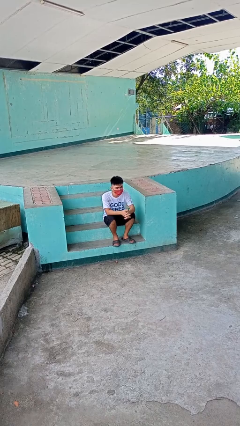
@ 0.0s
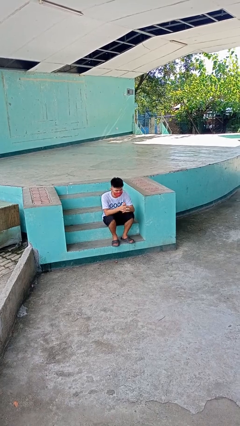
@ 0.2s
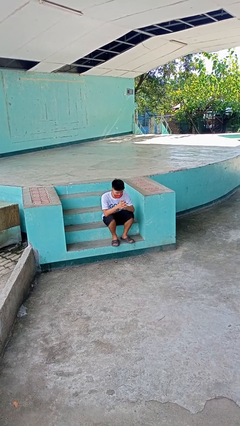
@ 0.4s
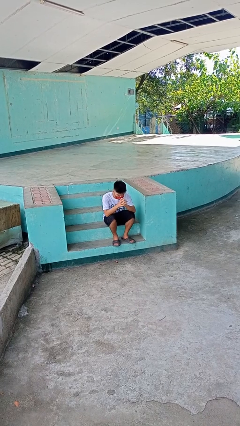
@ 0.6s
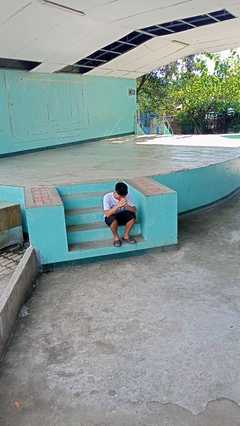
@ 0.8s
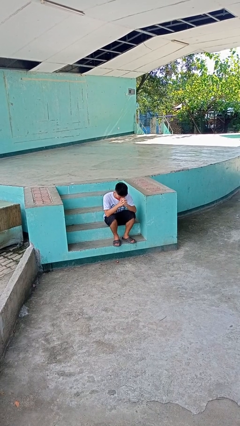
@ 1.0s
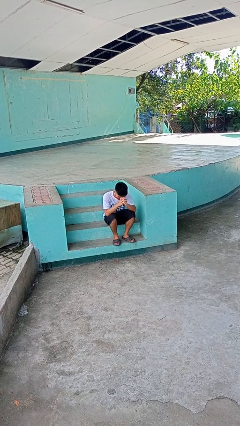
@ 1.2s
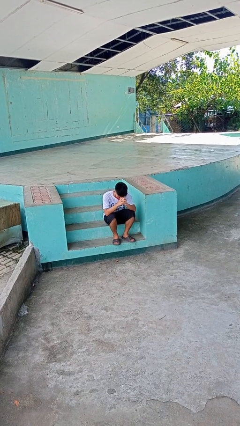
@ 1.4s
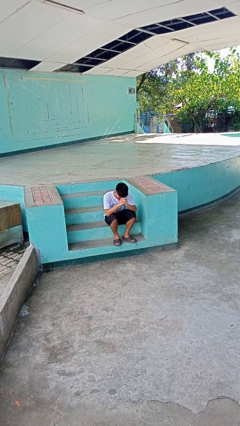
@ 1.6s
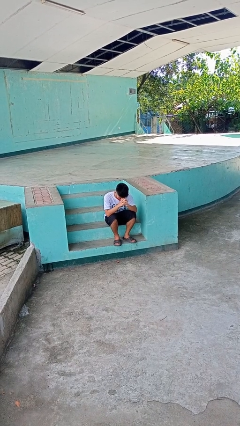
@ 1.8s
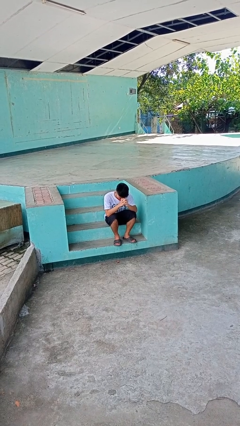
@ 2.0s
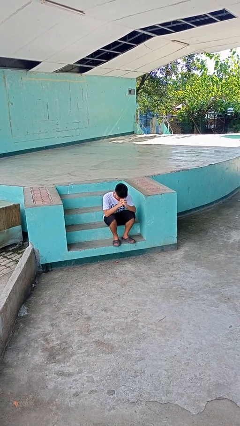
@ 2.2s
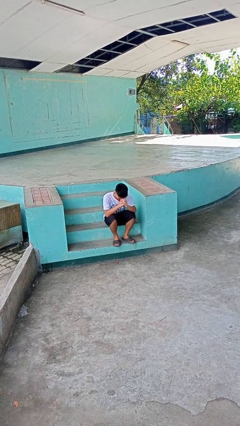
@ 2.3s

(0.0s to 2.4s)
person prays

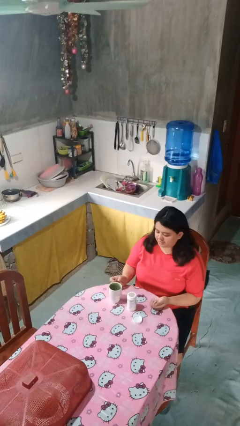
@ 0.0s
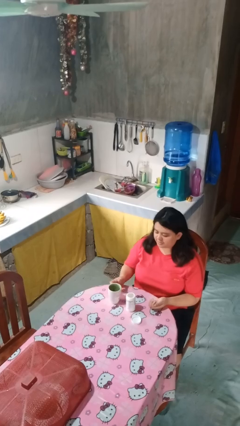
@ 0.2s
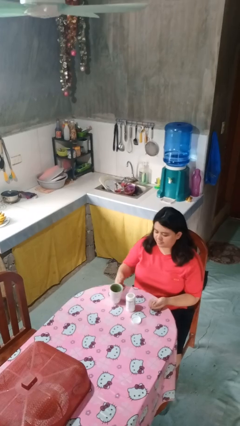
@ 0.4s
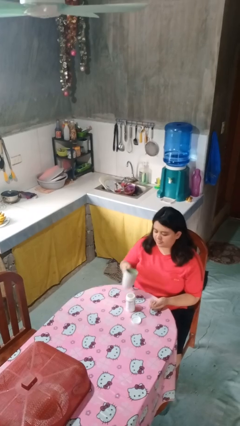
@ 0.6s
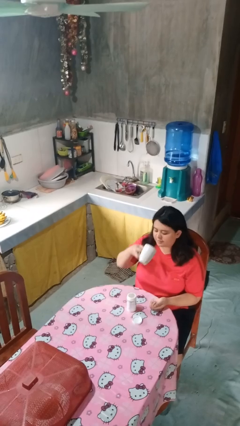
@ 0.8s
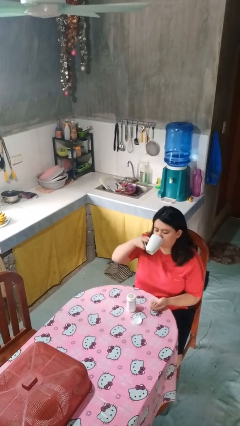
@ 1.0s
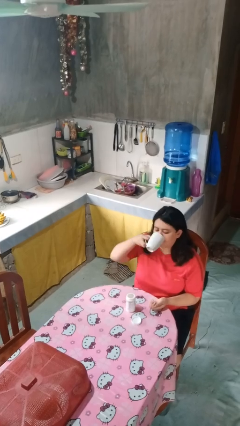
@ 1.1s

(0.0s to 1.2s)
person drinks from cup

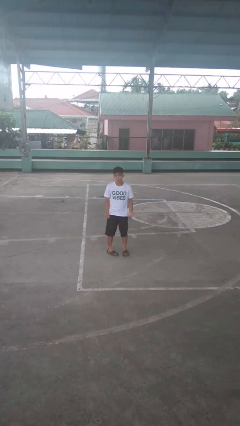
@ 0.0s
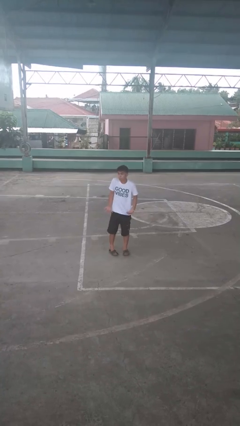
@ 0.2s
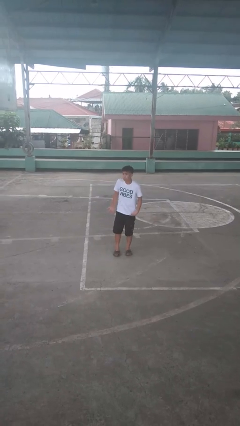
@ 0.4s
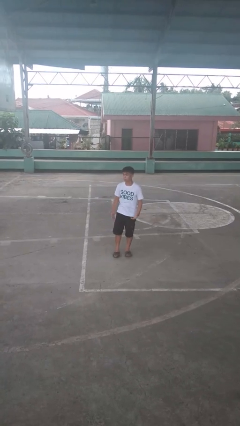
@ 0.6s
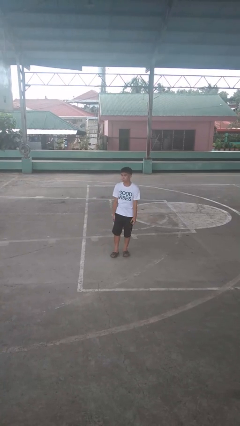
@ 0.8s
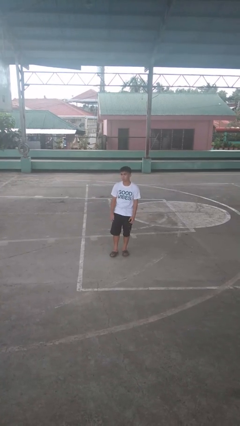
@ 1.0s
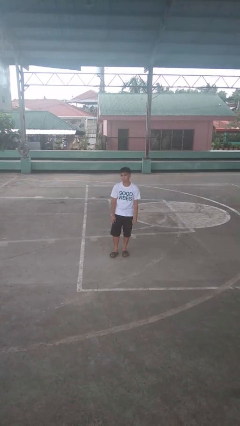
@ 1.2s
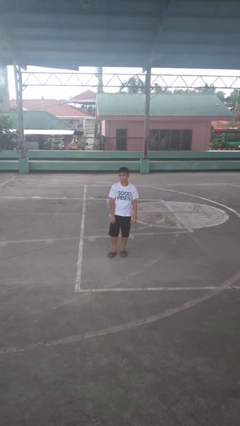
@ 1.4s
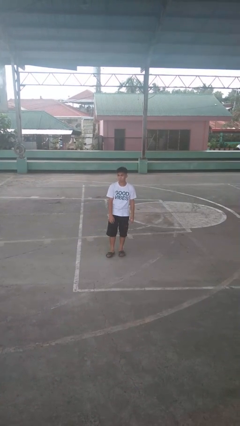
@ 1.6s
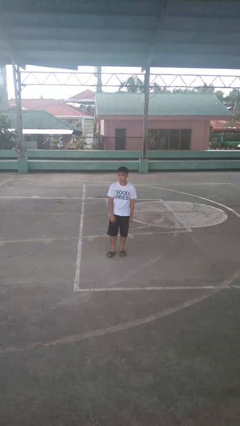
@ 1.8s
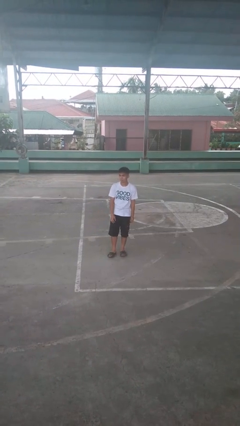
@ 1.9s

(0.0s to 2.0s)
person shrugs

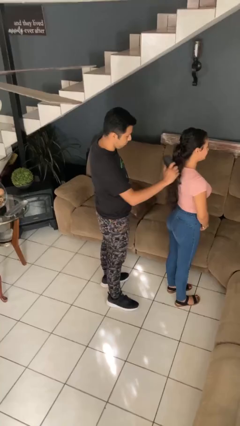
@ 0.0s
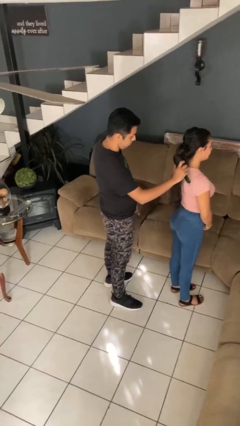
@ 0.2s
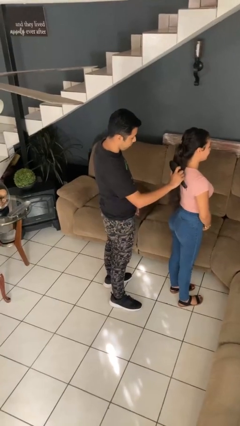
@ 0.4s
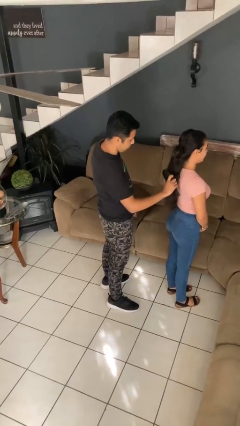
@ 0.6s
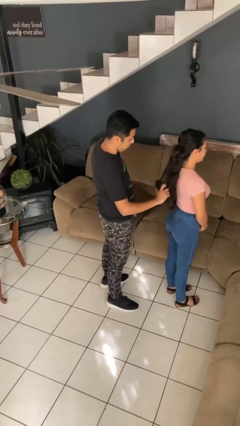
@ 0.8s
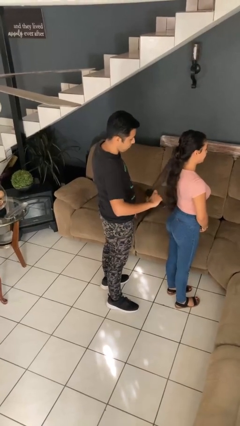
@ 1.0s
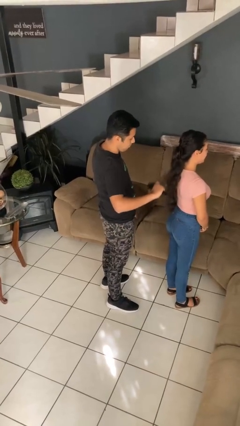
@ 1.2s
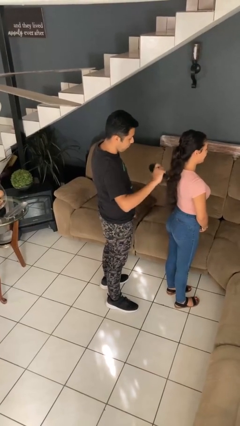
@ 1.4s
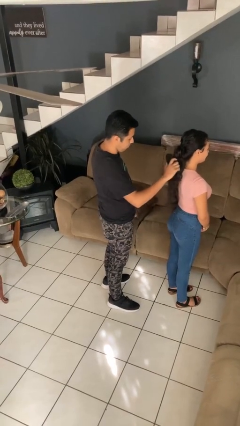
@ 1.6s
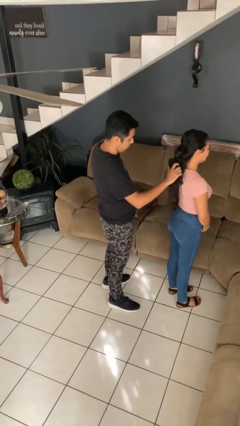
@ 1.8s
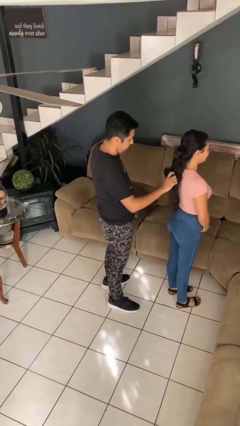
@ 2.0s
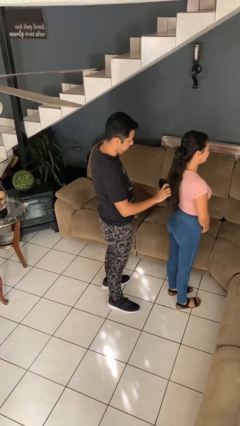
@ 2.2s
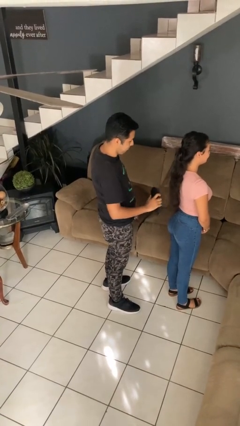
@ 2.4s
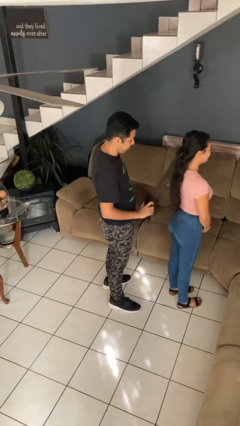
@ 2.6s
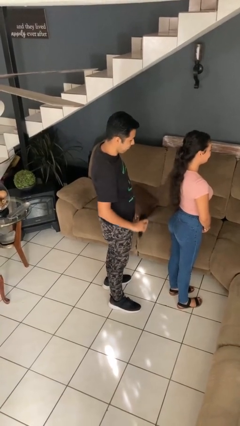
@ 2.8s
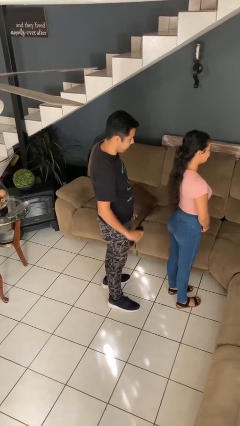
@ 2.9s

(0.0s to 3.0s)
person brushes hair of person

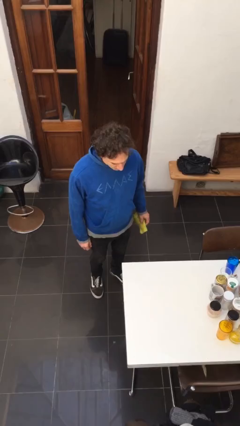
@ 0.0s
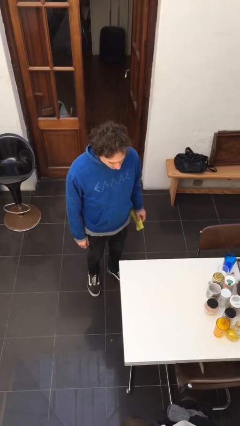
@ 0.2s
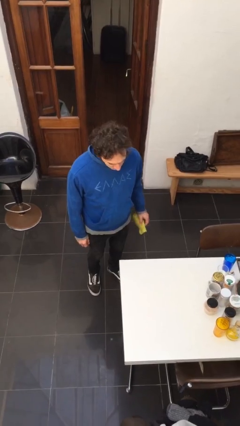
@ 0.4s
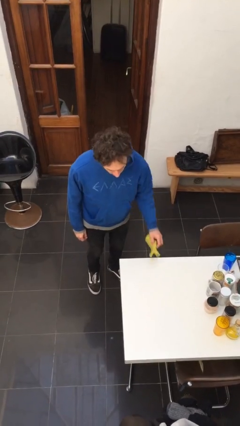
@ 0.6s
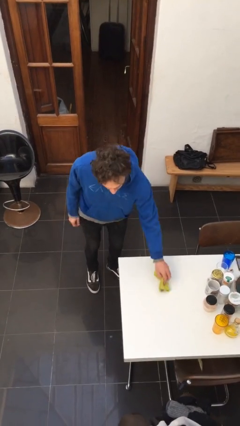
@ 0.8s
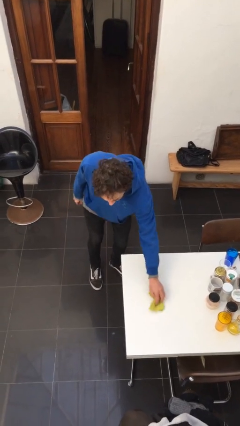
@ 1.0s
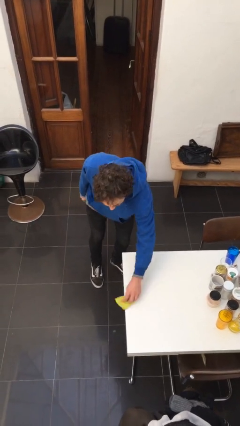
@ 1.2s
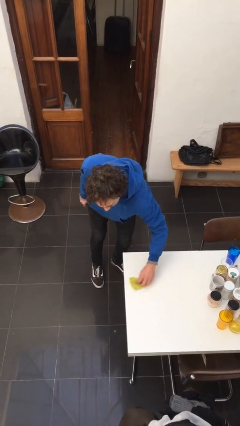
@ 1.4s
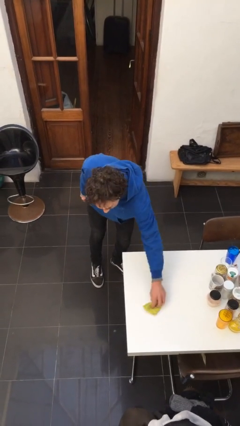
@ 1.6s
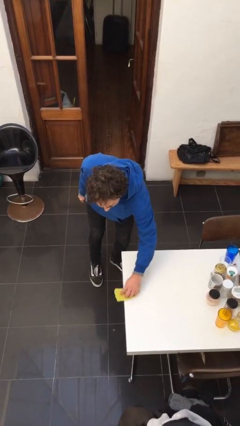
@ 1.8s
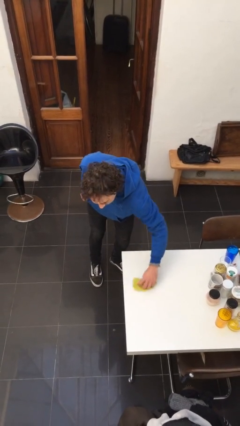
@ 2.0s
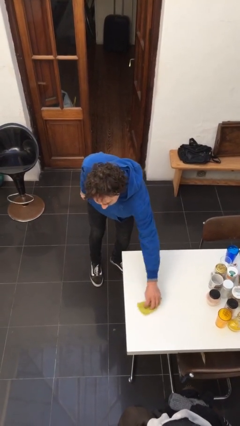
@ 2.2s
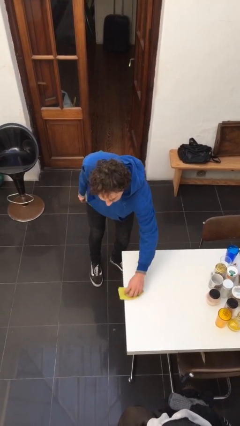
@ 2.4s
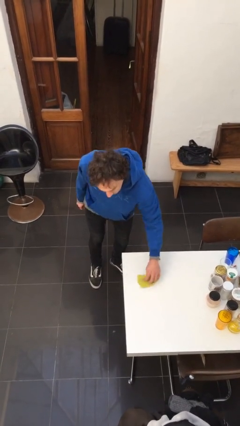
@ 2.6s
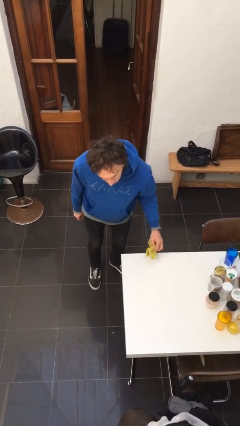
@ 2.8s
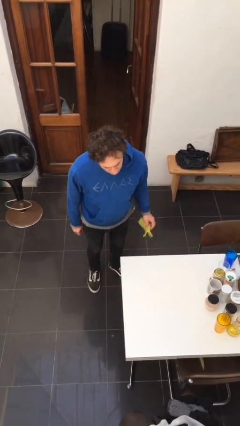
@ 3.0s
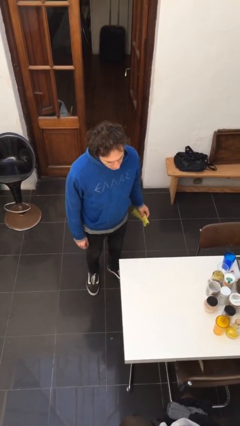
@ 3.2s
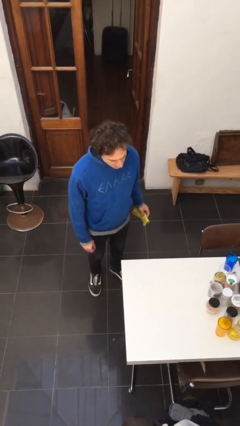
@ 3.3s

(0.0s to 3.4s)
person cleans table with rag

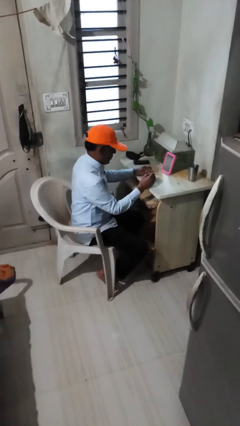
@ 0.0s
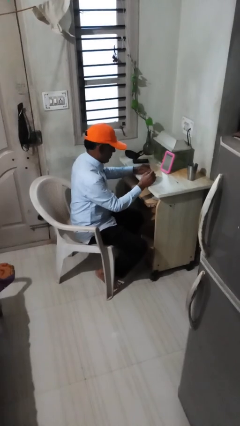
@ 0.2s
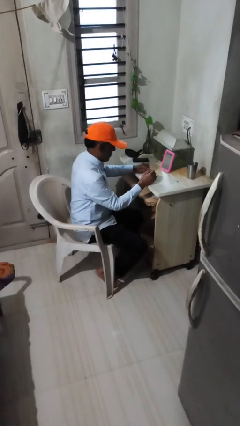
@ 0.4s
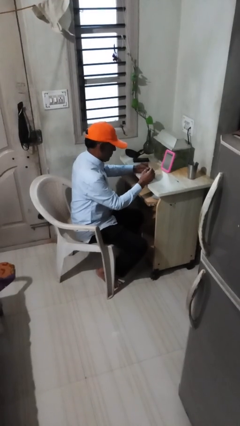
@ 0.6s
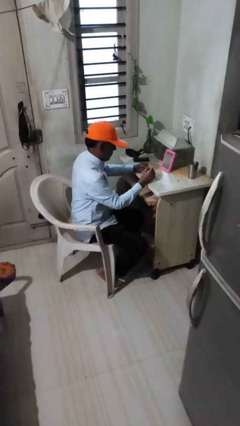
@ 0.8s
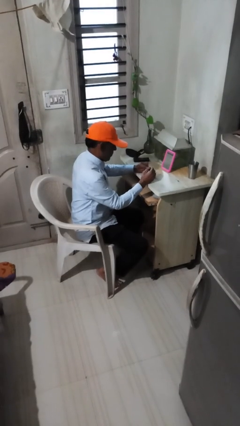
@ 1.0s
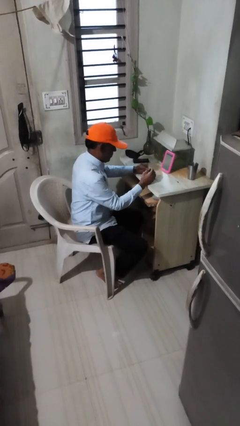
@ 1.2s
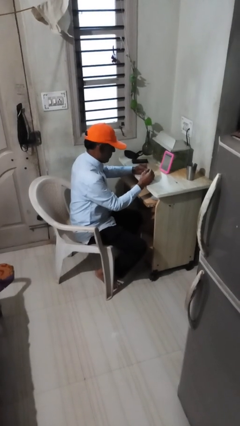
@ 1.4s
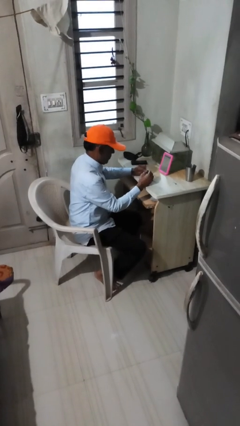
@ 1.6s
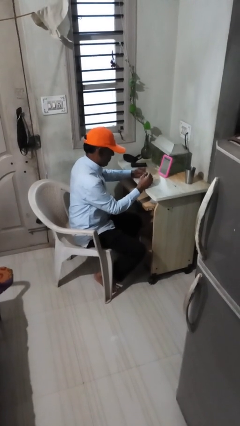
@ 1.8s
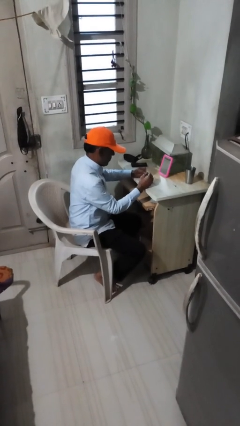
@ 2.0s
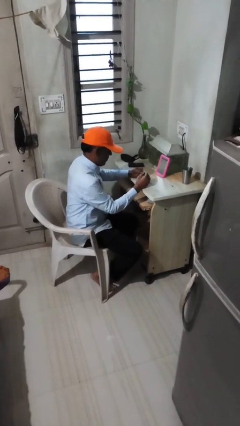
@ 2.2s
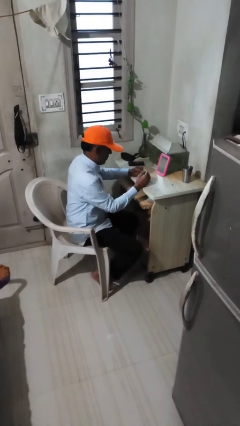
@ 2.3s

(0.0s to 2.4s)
person paints fingernails

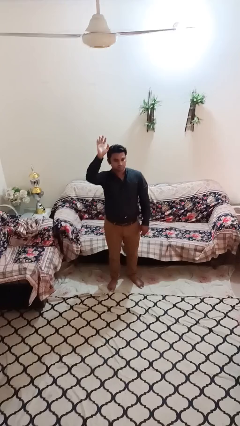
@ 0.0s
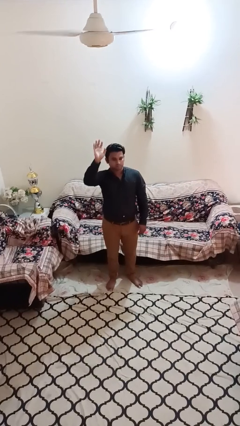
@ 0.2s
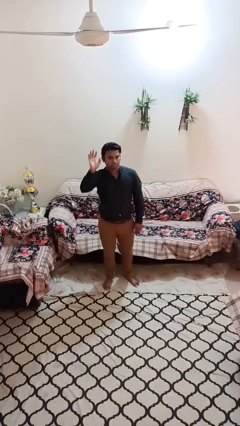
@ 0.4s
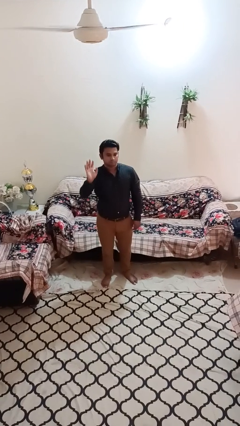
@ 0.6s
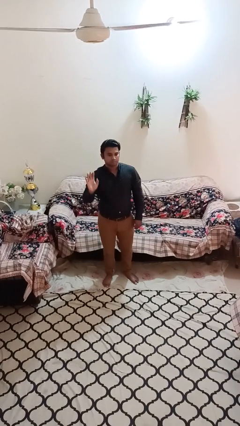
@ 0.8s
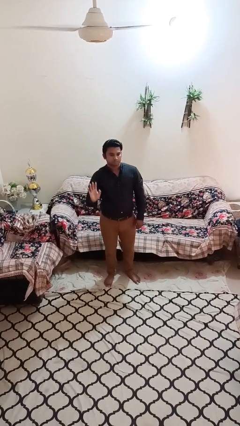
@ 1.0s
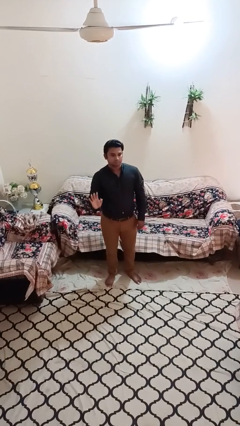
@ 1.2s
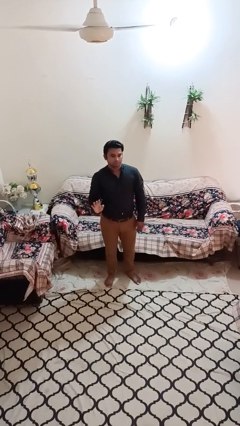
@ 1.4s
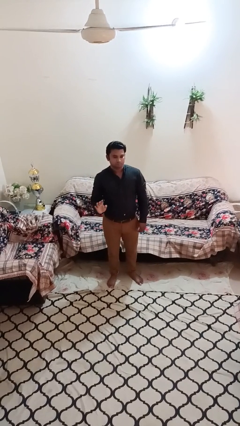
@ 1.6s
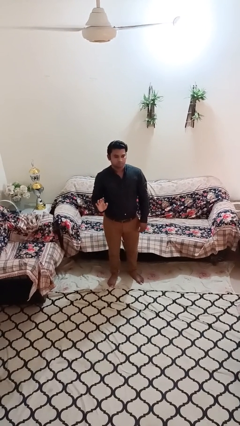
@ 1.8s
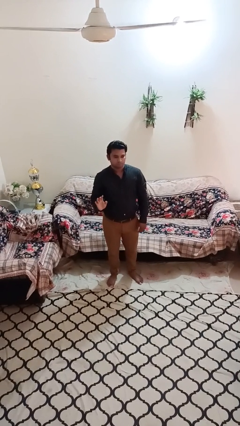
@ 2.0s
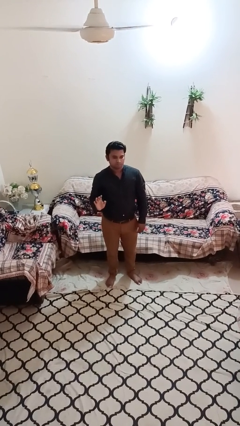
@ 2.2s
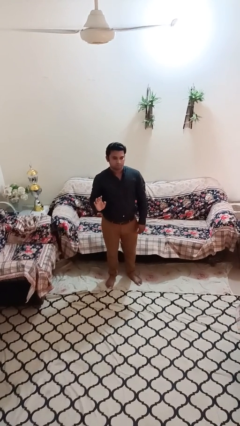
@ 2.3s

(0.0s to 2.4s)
person gestures lower hand

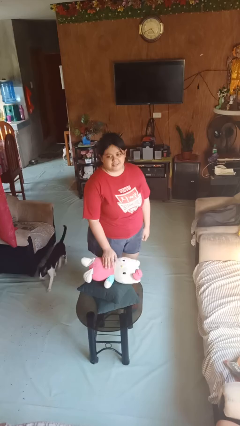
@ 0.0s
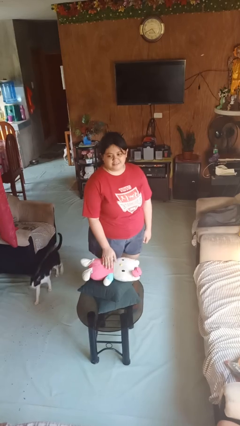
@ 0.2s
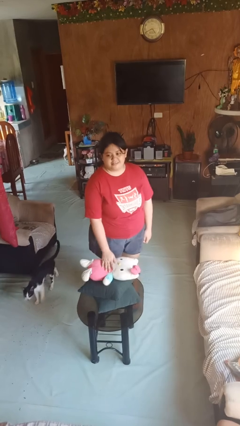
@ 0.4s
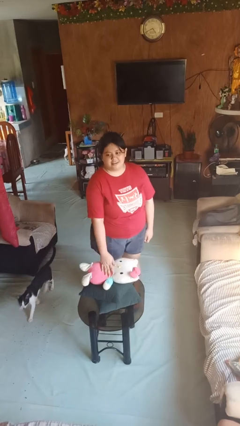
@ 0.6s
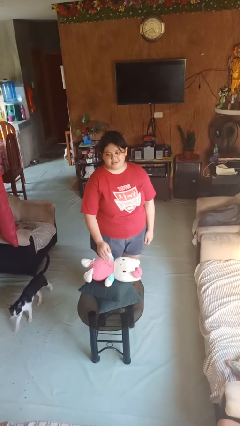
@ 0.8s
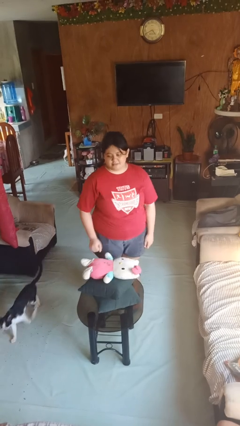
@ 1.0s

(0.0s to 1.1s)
person taps object with finger
